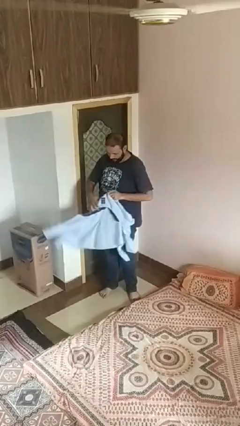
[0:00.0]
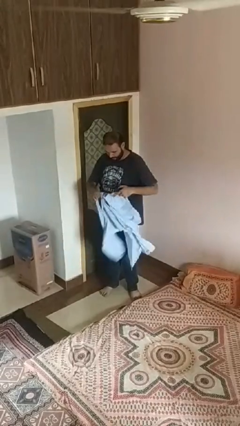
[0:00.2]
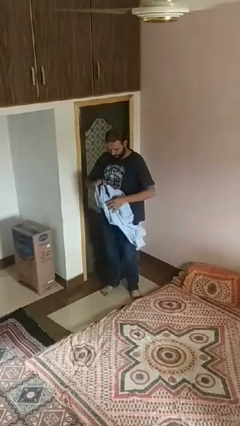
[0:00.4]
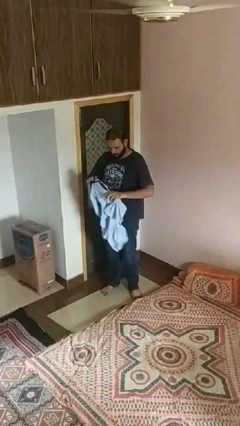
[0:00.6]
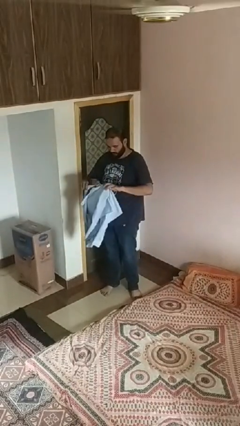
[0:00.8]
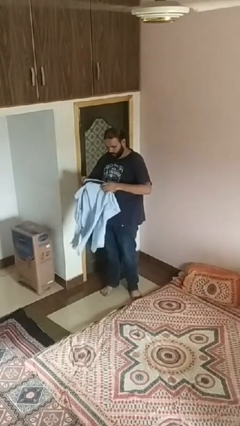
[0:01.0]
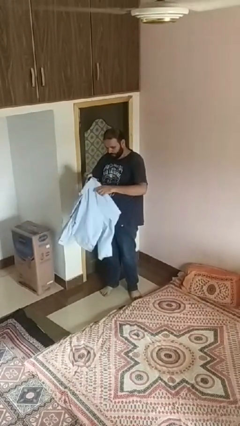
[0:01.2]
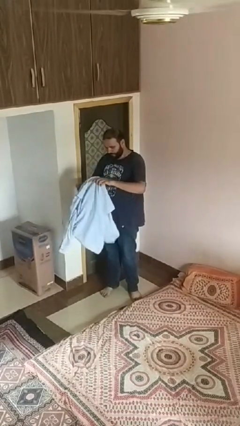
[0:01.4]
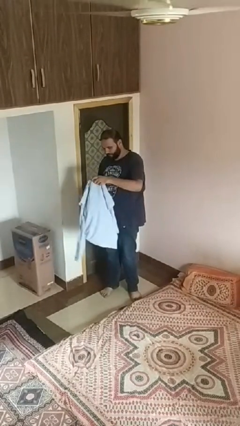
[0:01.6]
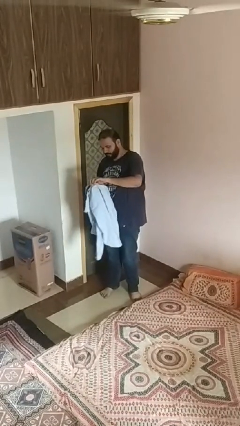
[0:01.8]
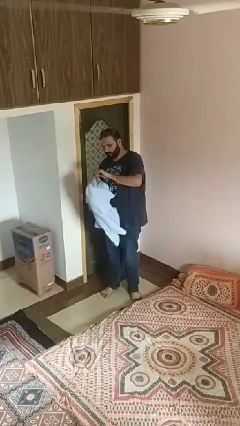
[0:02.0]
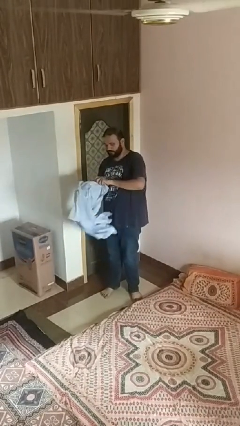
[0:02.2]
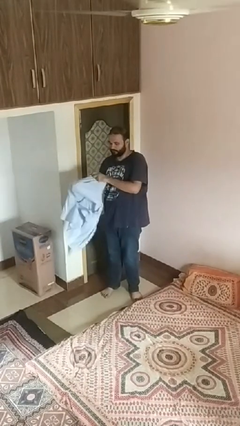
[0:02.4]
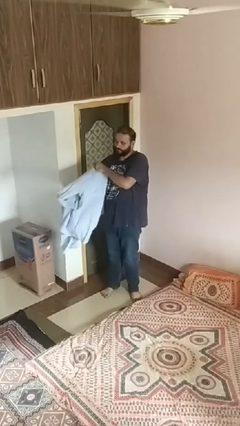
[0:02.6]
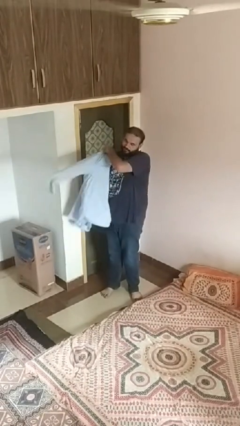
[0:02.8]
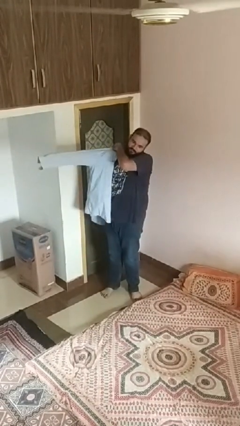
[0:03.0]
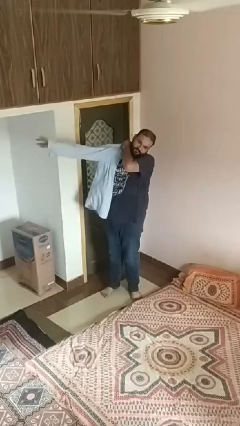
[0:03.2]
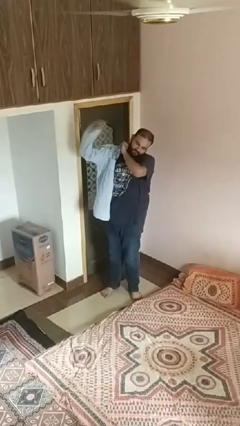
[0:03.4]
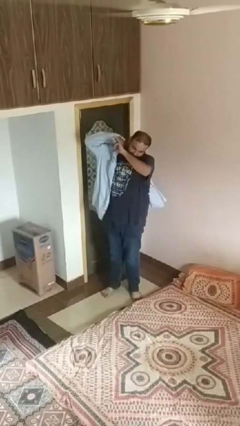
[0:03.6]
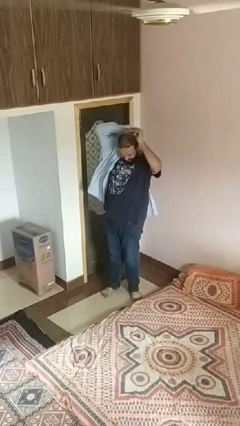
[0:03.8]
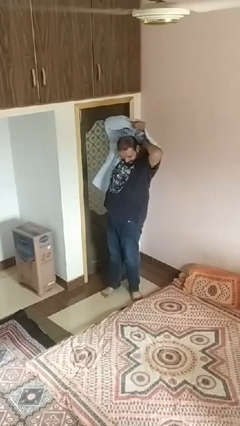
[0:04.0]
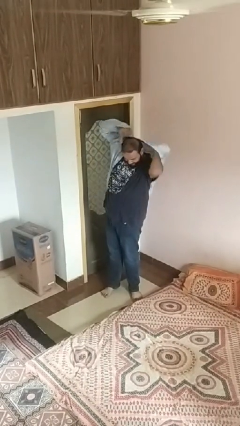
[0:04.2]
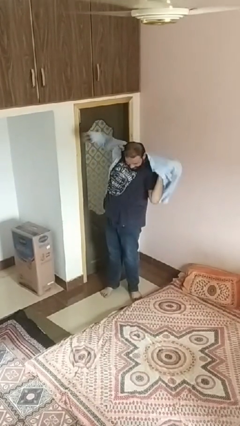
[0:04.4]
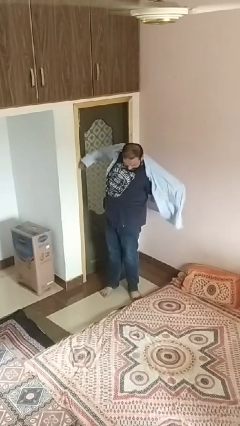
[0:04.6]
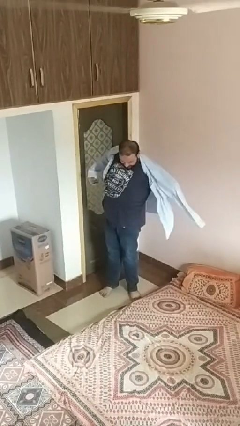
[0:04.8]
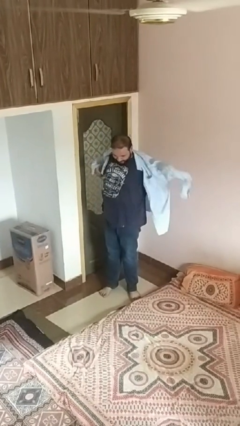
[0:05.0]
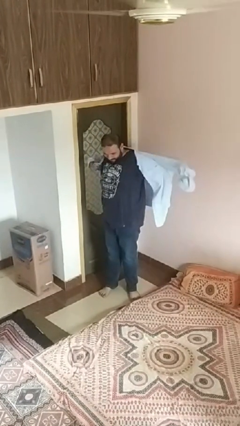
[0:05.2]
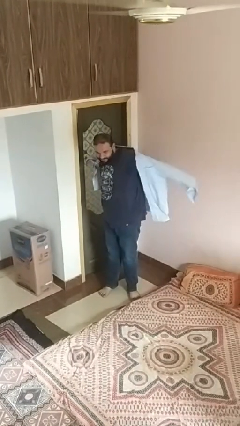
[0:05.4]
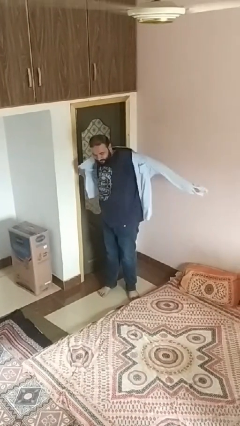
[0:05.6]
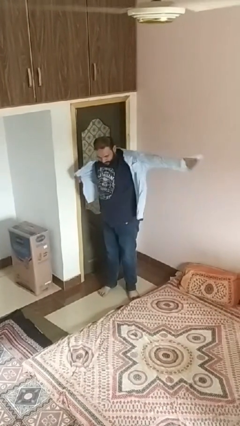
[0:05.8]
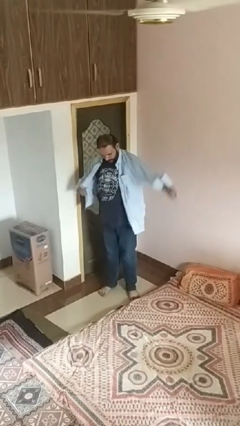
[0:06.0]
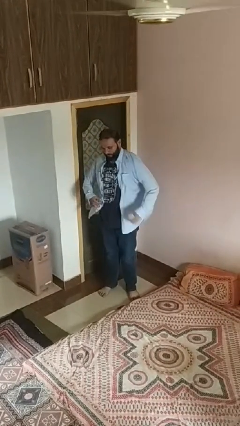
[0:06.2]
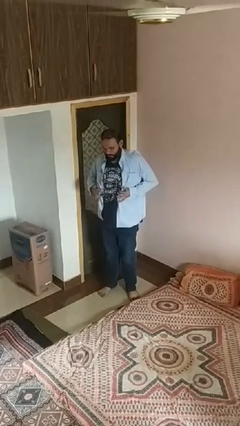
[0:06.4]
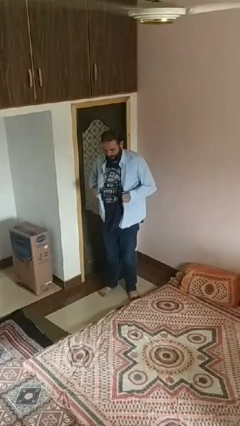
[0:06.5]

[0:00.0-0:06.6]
person puts on shirt

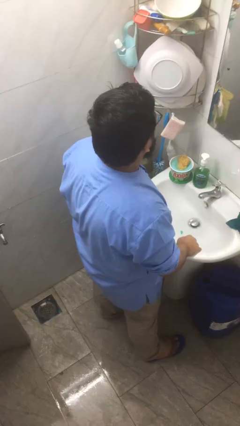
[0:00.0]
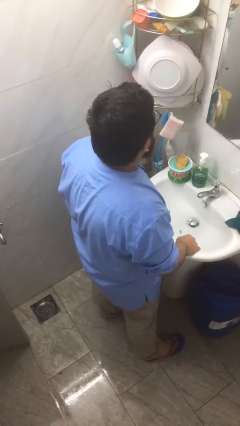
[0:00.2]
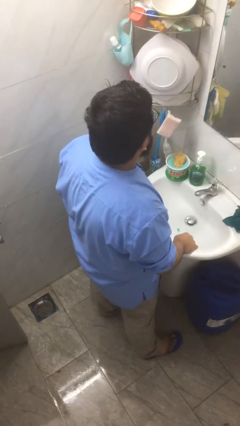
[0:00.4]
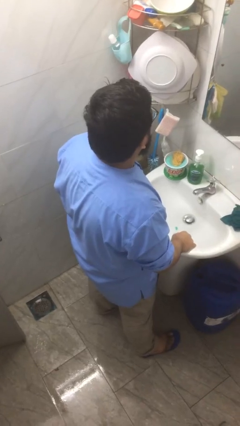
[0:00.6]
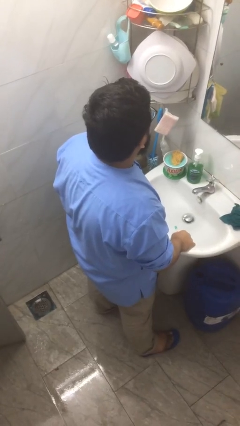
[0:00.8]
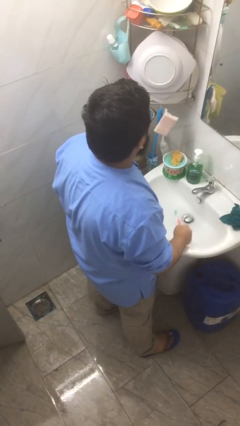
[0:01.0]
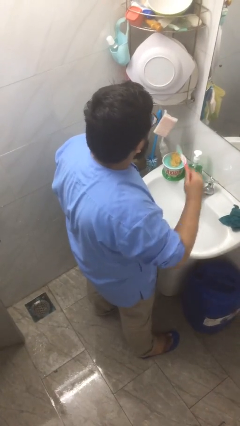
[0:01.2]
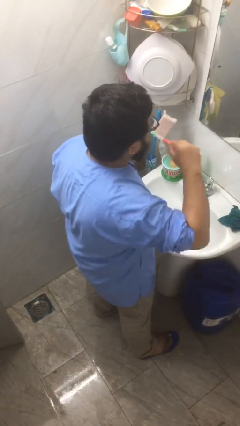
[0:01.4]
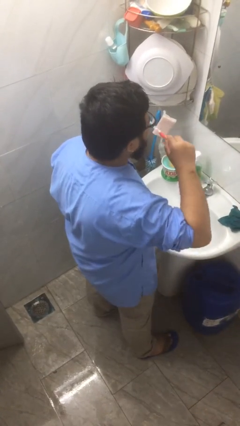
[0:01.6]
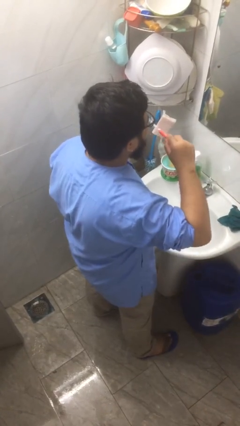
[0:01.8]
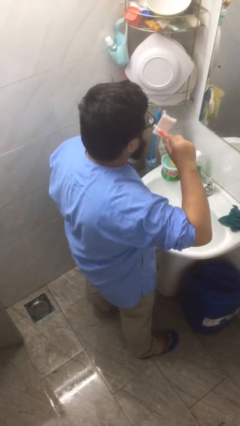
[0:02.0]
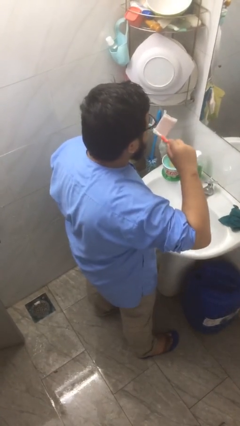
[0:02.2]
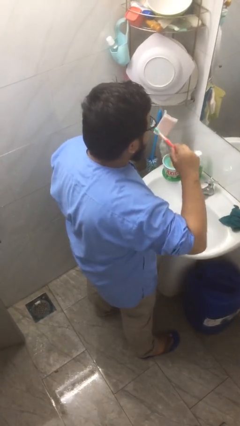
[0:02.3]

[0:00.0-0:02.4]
person brushes teeth

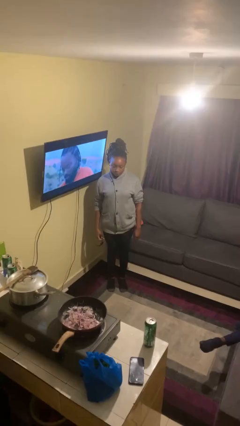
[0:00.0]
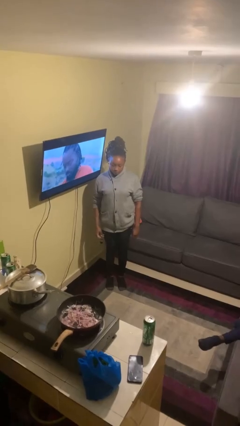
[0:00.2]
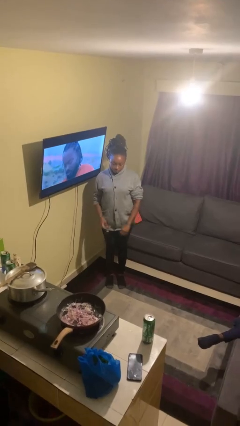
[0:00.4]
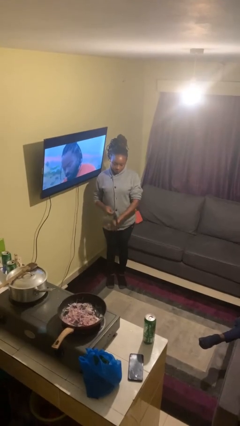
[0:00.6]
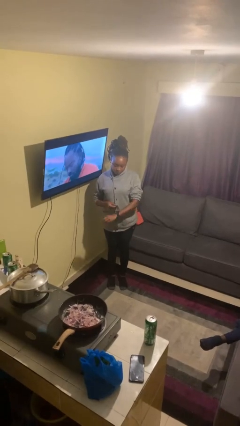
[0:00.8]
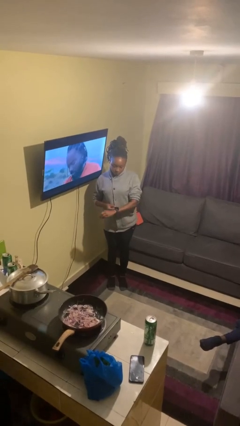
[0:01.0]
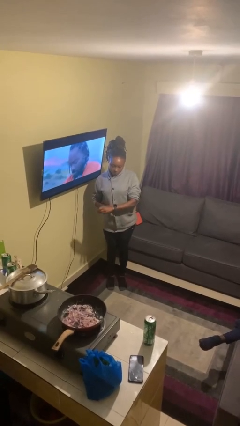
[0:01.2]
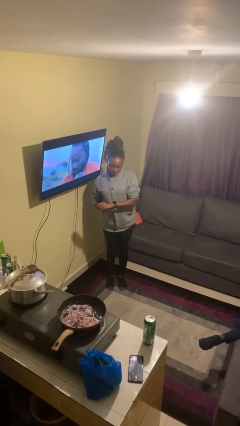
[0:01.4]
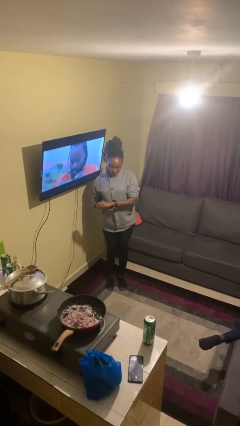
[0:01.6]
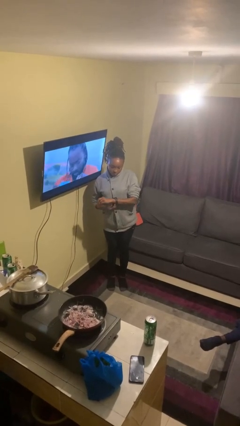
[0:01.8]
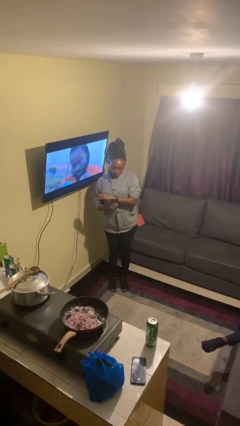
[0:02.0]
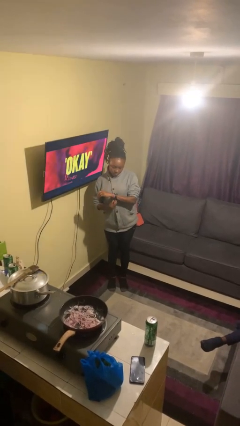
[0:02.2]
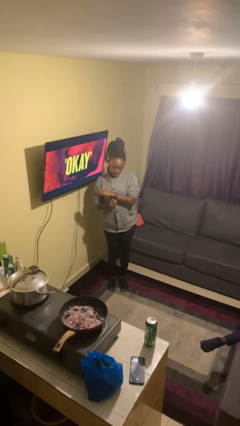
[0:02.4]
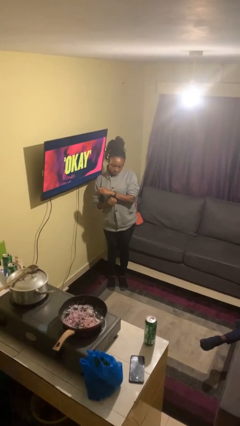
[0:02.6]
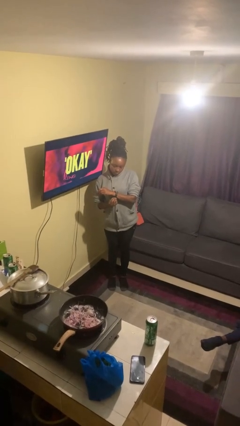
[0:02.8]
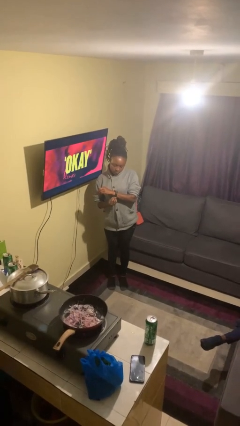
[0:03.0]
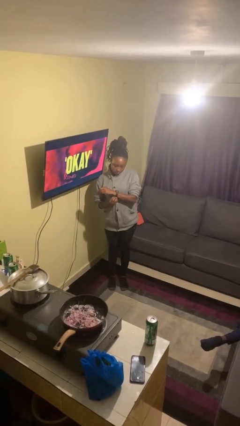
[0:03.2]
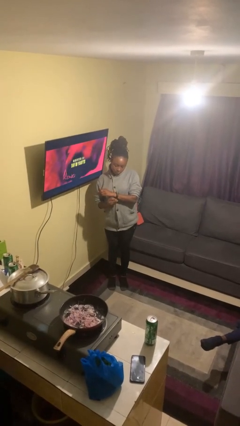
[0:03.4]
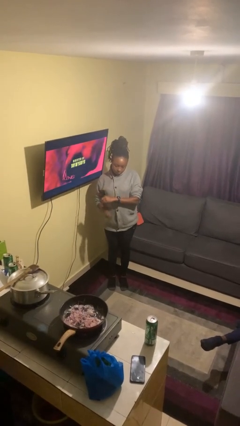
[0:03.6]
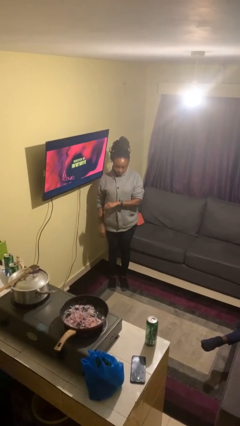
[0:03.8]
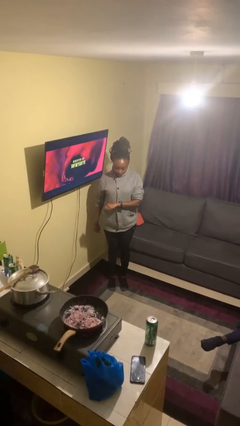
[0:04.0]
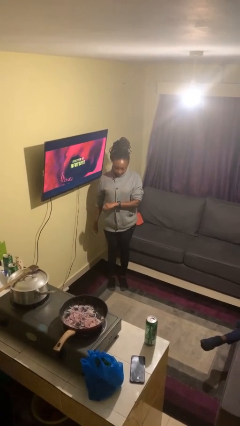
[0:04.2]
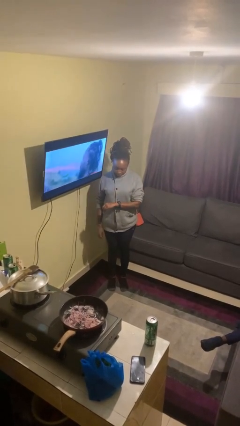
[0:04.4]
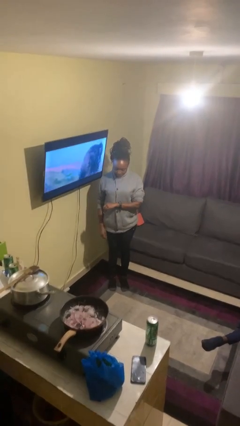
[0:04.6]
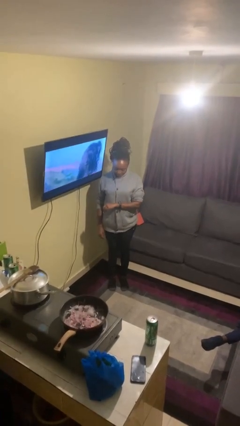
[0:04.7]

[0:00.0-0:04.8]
person puts on wristwatch

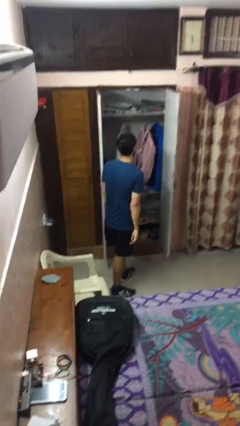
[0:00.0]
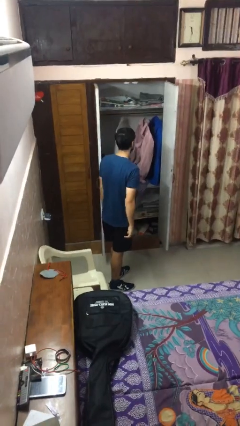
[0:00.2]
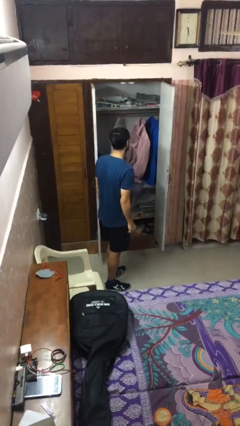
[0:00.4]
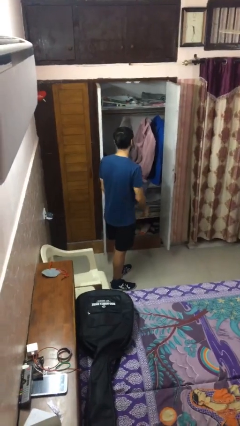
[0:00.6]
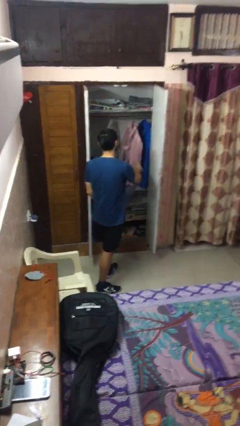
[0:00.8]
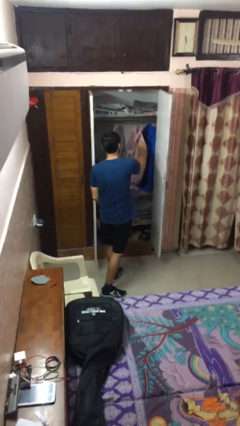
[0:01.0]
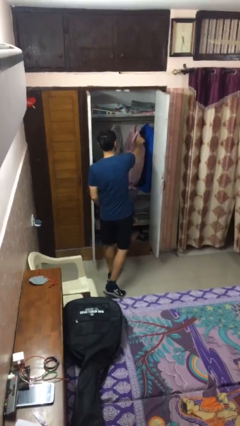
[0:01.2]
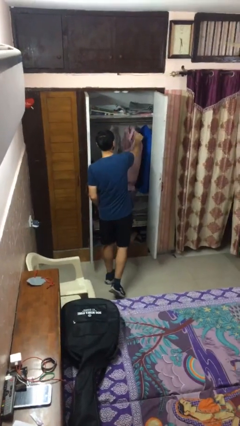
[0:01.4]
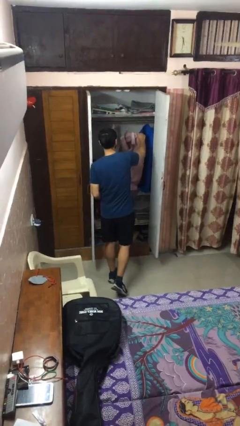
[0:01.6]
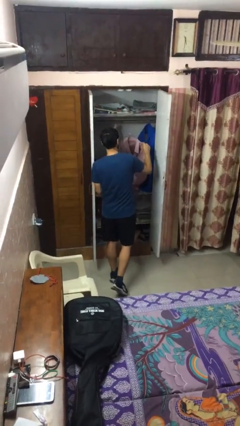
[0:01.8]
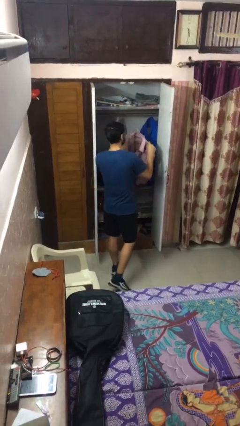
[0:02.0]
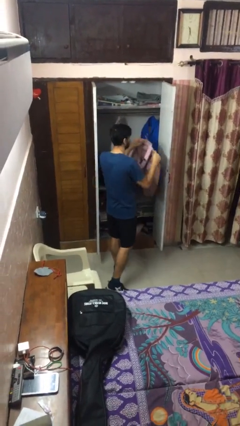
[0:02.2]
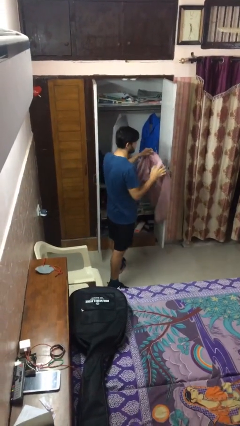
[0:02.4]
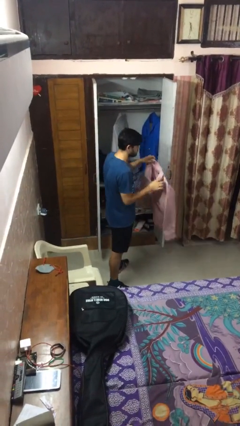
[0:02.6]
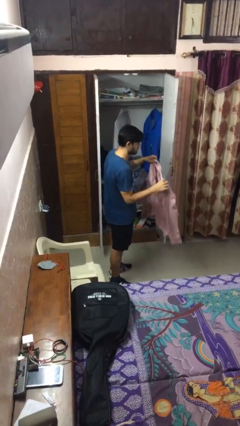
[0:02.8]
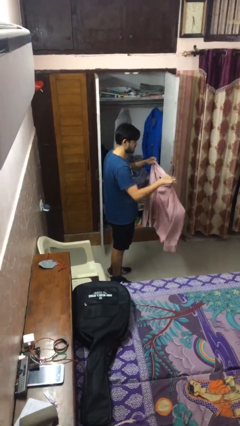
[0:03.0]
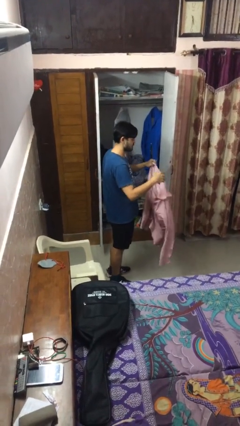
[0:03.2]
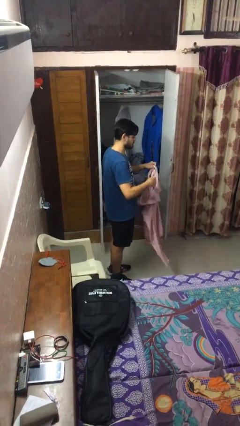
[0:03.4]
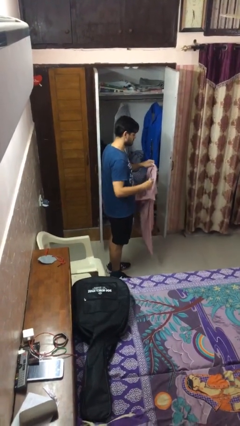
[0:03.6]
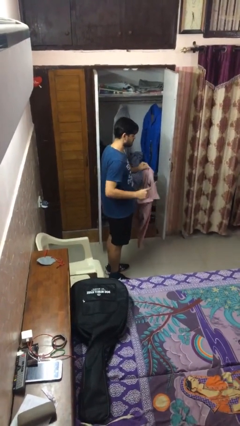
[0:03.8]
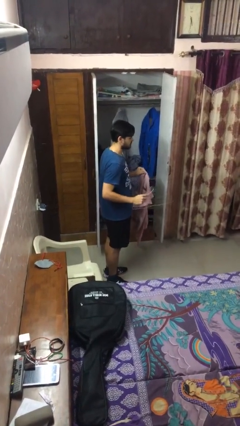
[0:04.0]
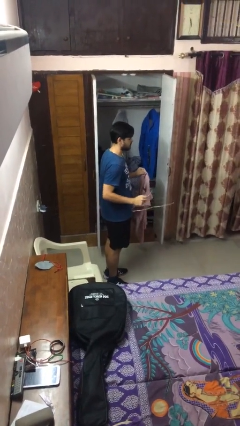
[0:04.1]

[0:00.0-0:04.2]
person takes clothes from closet
